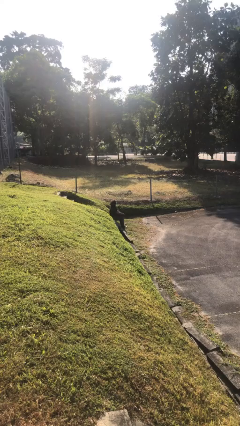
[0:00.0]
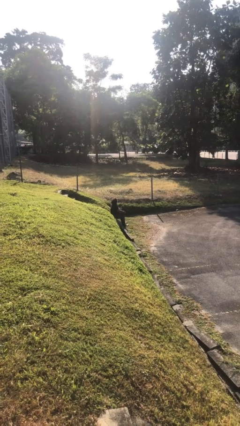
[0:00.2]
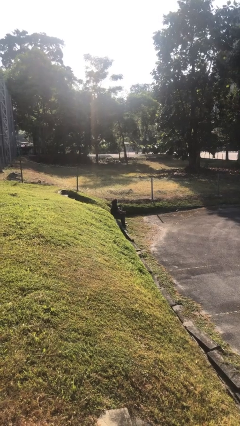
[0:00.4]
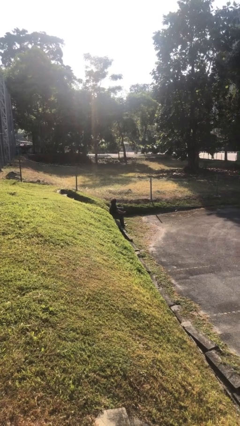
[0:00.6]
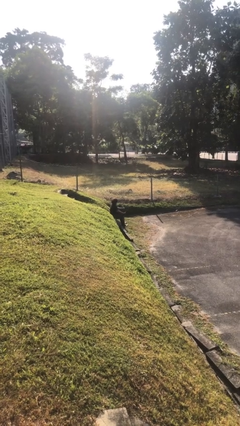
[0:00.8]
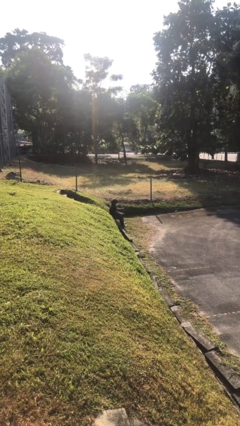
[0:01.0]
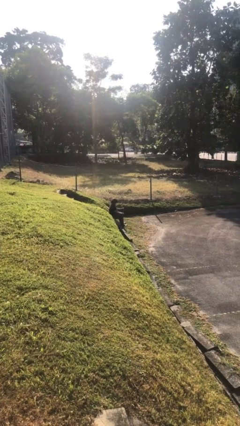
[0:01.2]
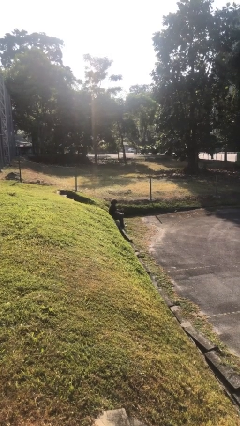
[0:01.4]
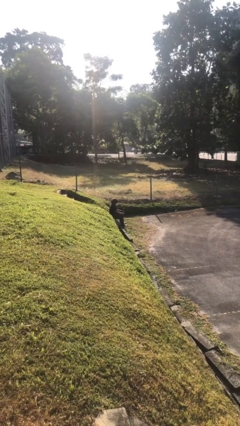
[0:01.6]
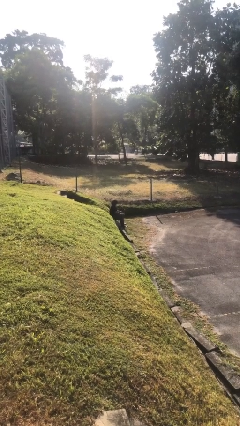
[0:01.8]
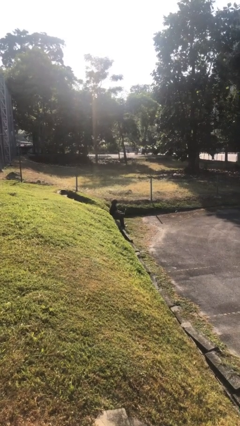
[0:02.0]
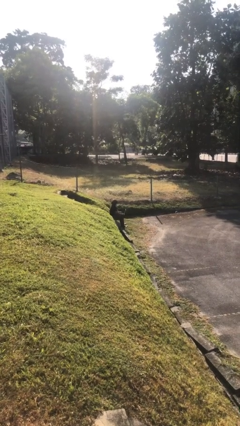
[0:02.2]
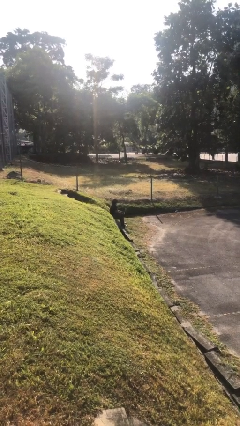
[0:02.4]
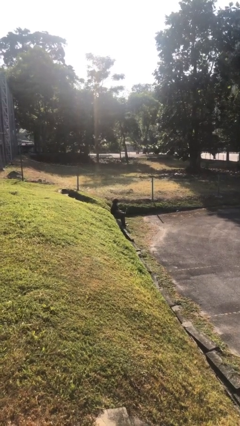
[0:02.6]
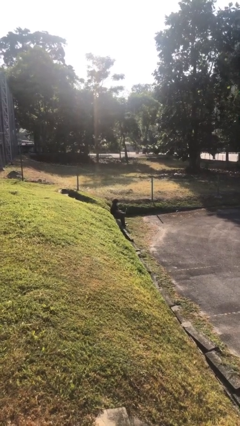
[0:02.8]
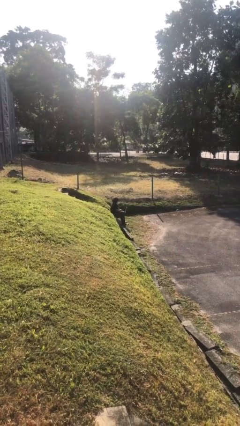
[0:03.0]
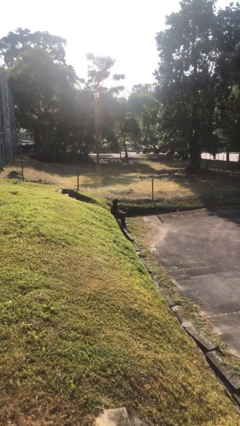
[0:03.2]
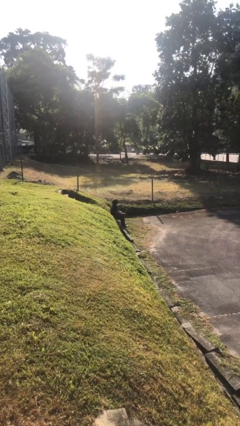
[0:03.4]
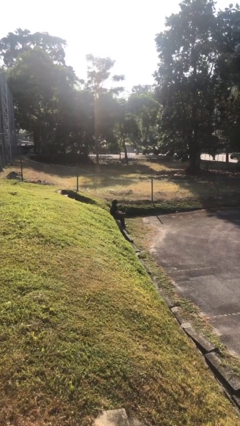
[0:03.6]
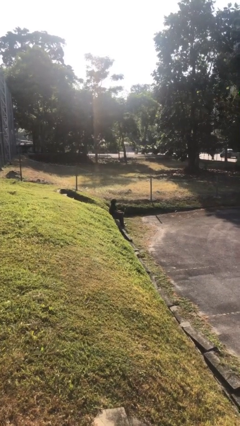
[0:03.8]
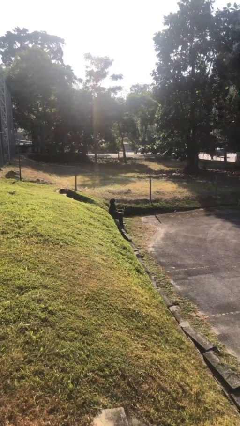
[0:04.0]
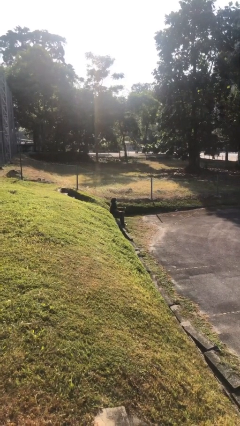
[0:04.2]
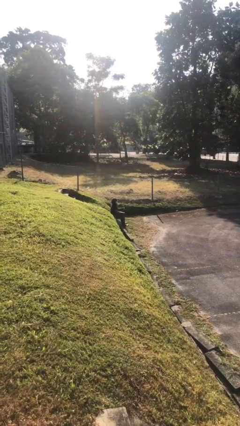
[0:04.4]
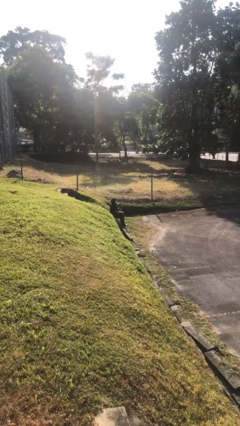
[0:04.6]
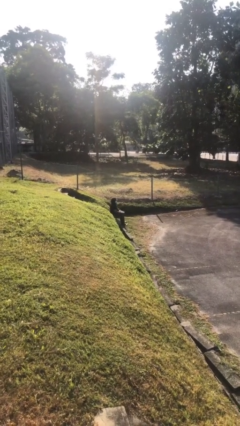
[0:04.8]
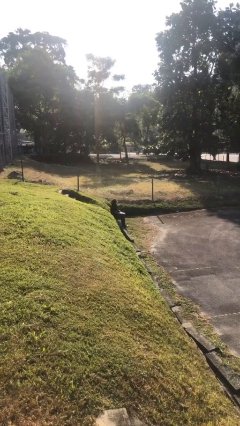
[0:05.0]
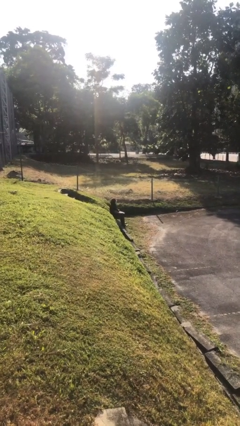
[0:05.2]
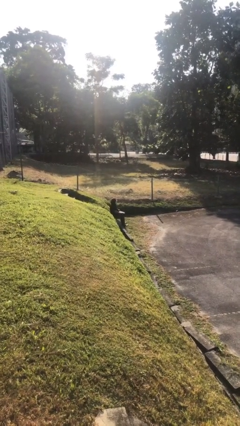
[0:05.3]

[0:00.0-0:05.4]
person interacts with laptop

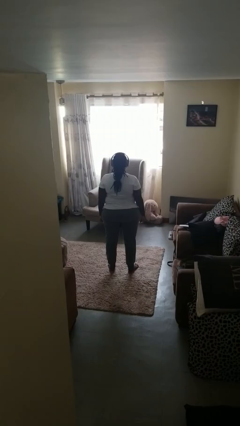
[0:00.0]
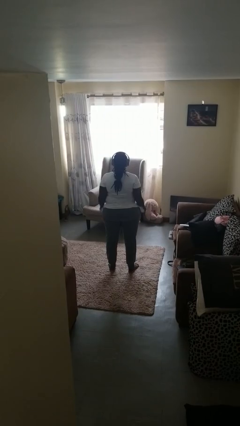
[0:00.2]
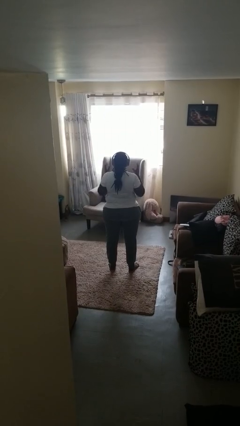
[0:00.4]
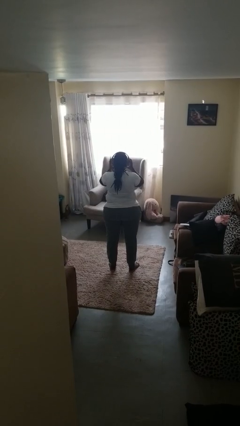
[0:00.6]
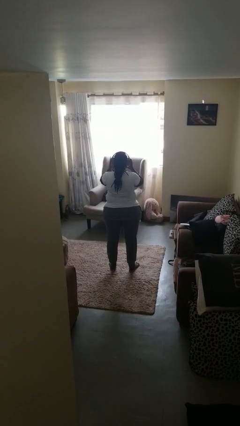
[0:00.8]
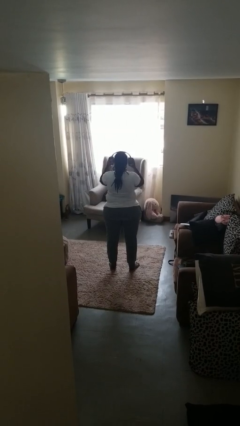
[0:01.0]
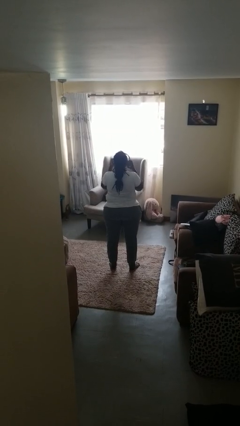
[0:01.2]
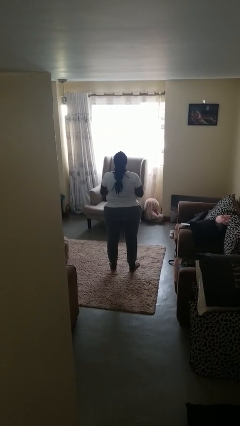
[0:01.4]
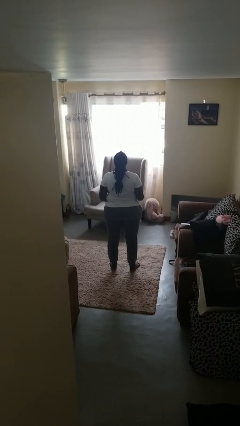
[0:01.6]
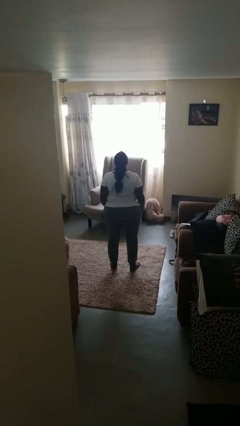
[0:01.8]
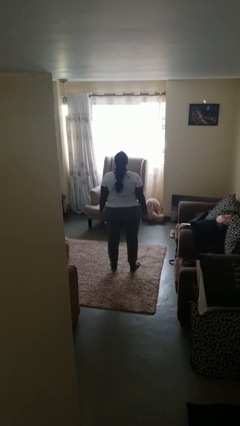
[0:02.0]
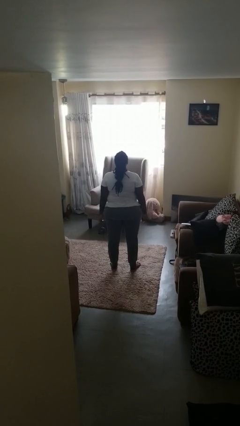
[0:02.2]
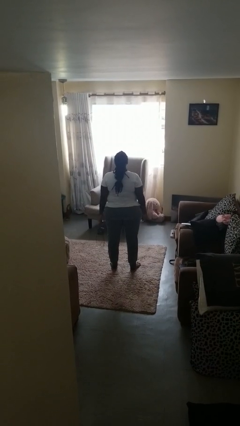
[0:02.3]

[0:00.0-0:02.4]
person takes off headphones

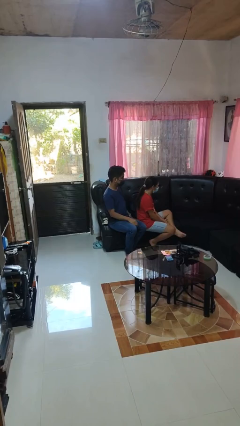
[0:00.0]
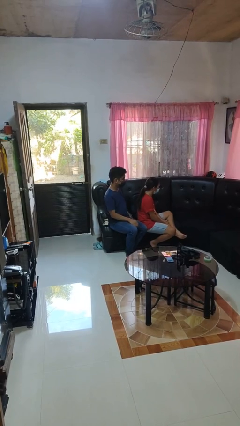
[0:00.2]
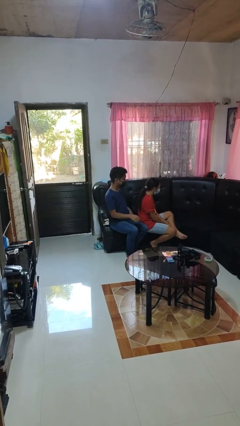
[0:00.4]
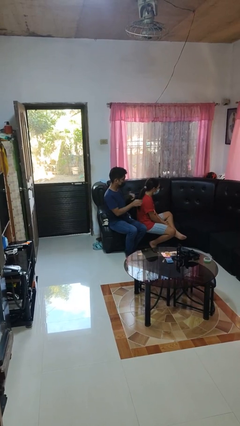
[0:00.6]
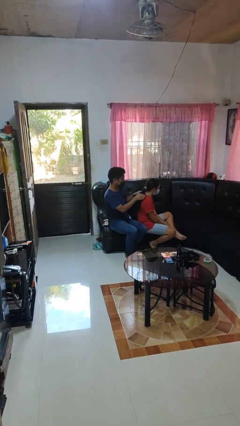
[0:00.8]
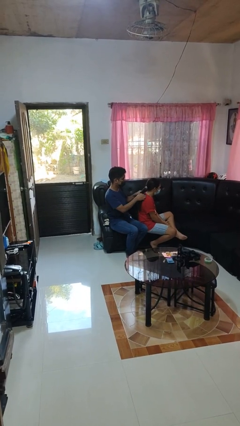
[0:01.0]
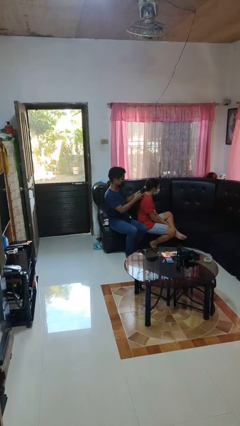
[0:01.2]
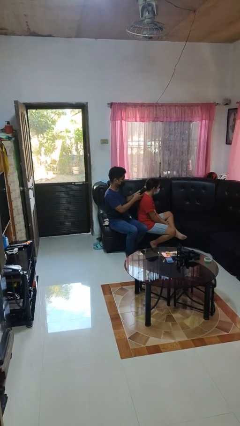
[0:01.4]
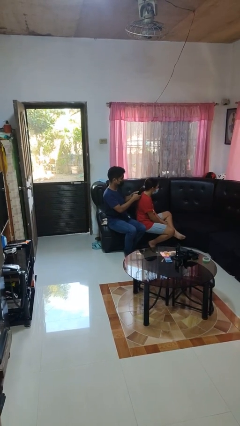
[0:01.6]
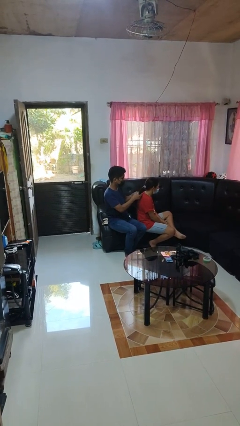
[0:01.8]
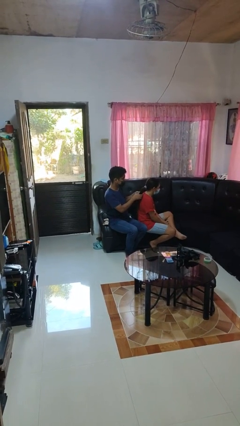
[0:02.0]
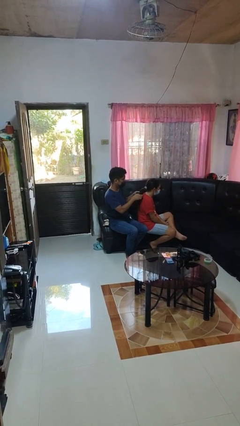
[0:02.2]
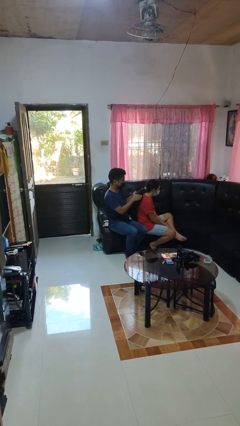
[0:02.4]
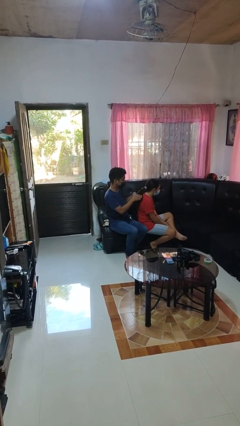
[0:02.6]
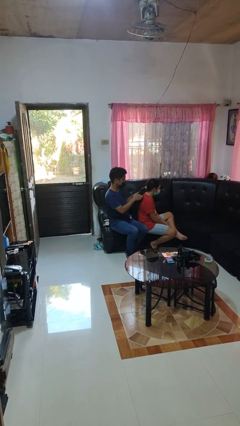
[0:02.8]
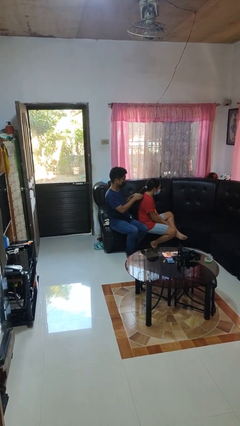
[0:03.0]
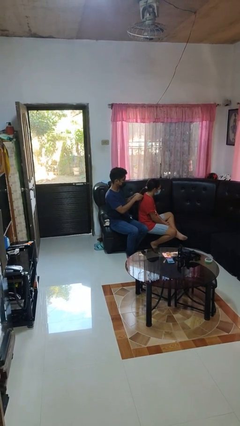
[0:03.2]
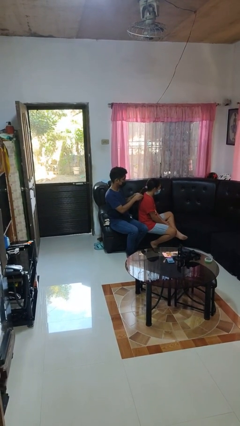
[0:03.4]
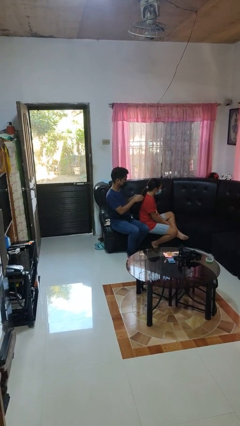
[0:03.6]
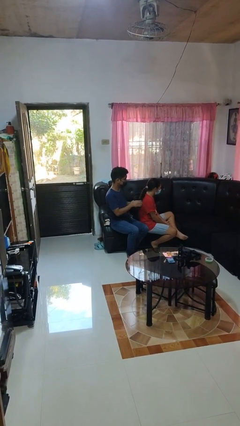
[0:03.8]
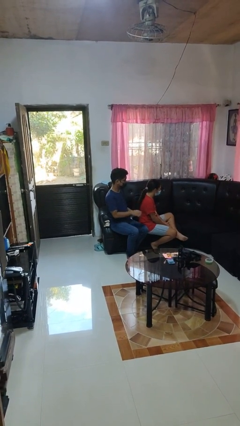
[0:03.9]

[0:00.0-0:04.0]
person braids hair of person

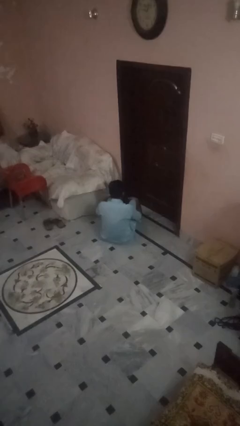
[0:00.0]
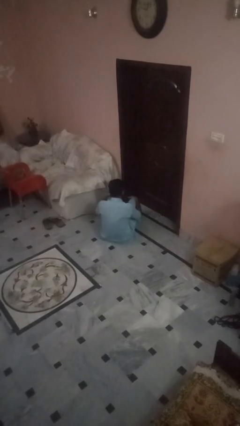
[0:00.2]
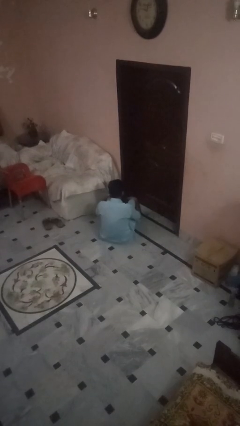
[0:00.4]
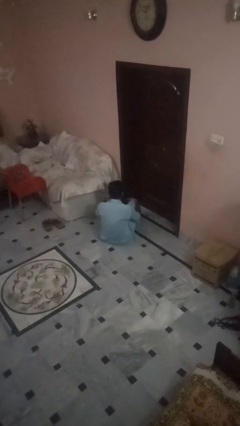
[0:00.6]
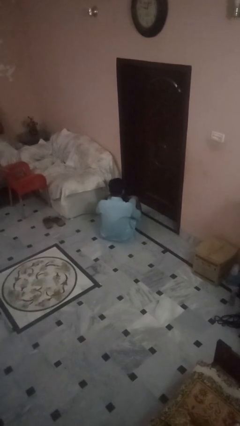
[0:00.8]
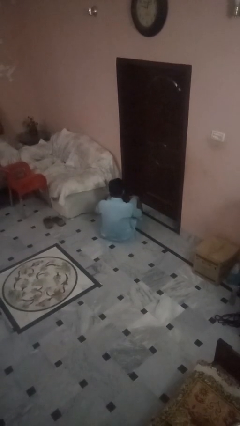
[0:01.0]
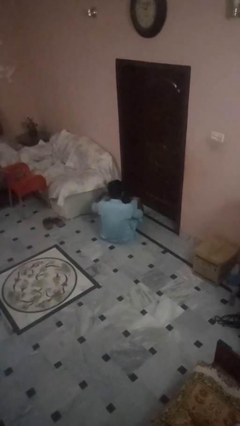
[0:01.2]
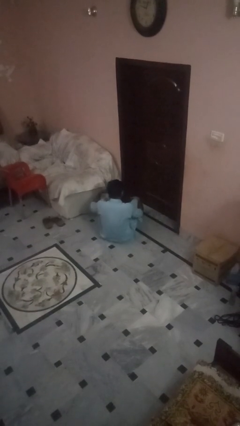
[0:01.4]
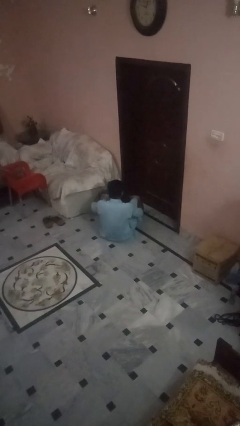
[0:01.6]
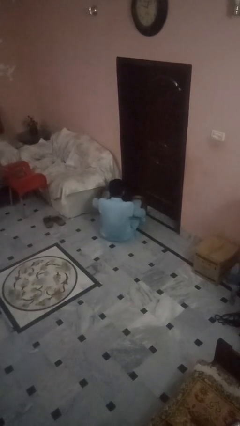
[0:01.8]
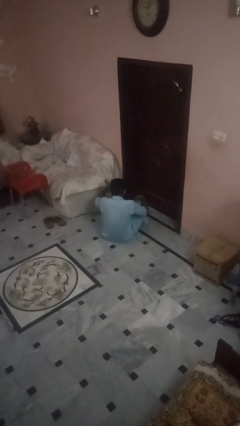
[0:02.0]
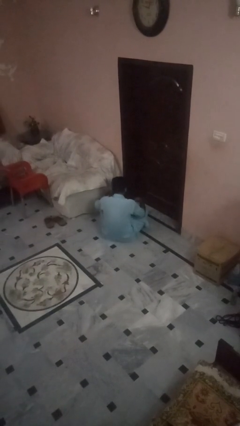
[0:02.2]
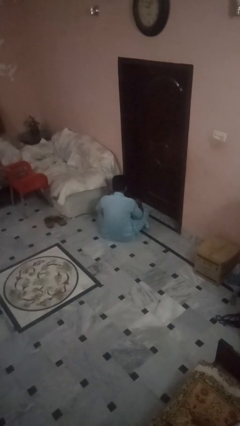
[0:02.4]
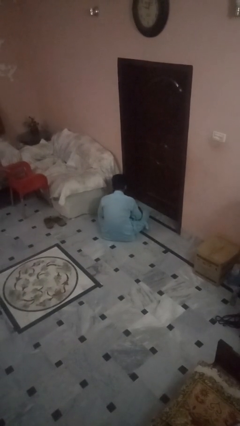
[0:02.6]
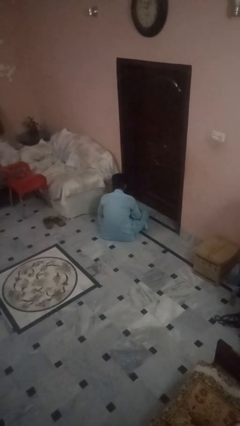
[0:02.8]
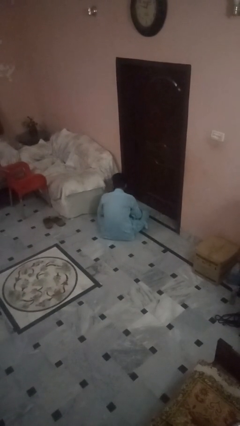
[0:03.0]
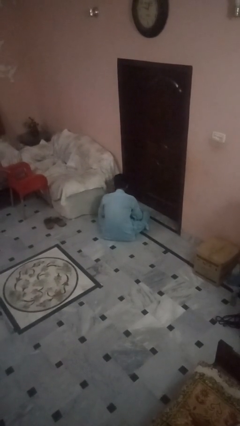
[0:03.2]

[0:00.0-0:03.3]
person crosses legs

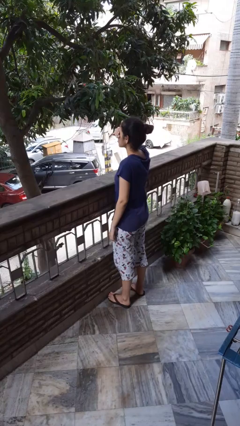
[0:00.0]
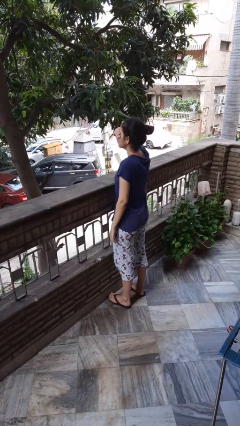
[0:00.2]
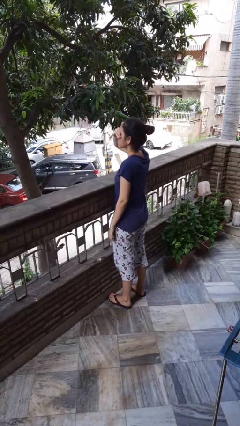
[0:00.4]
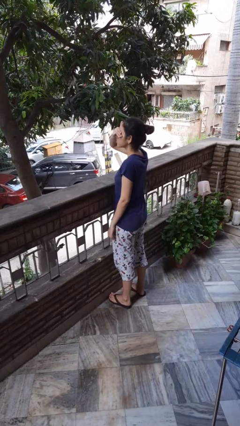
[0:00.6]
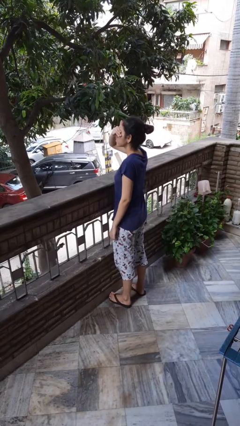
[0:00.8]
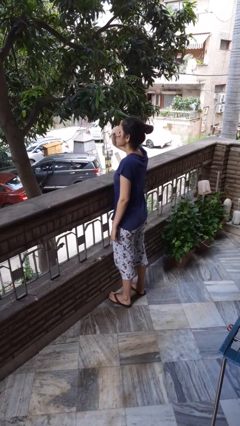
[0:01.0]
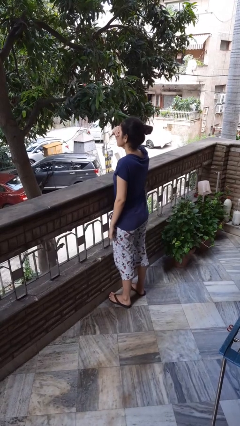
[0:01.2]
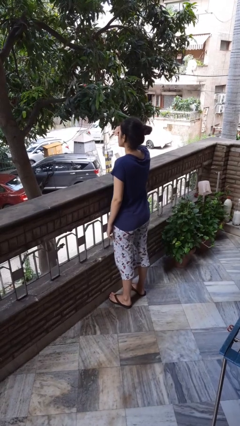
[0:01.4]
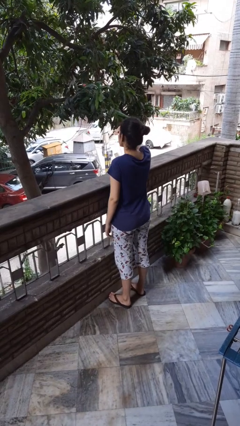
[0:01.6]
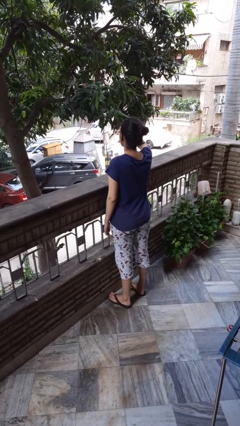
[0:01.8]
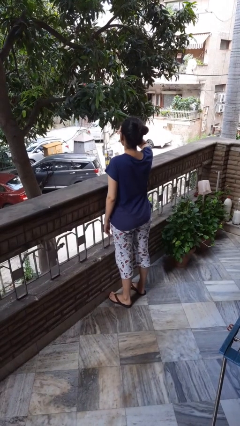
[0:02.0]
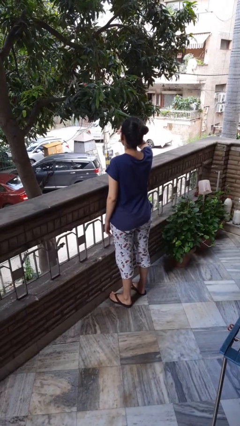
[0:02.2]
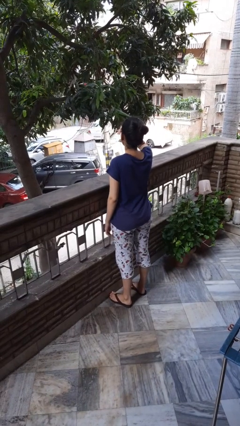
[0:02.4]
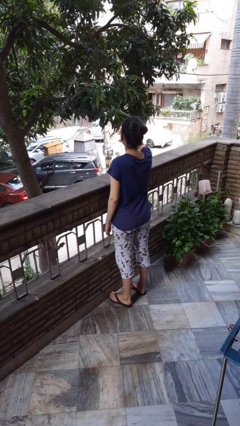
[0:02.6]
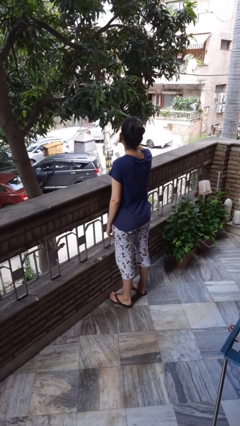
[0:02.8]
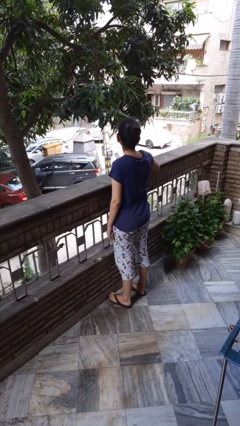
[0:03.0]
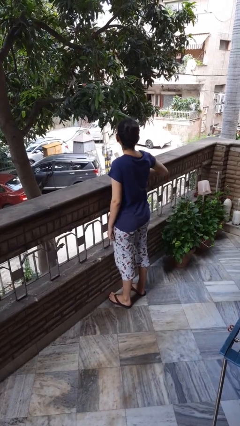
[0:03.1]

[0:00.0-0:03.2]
person shades eyes
